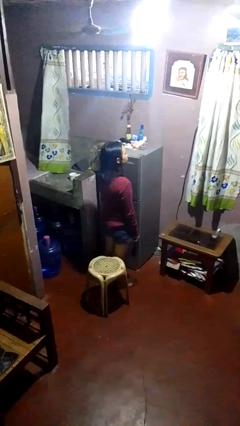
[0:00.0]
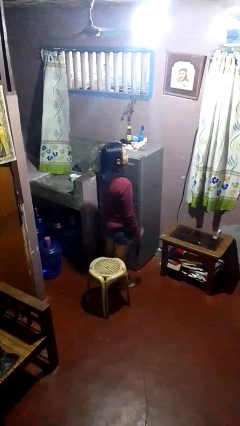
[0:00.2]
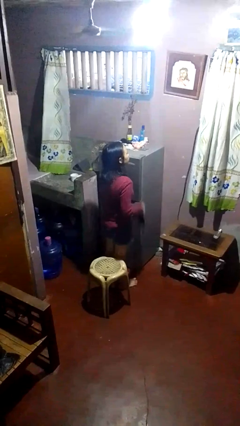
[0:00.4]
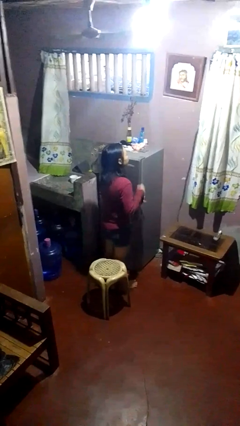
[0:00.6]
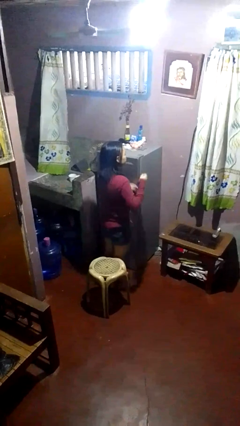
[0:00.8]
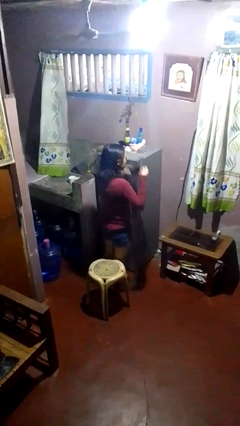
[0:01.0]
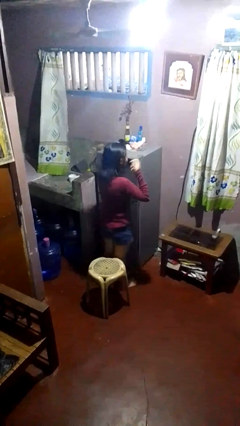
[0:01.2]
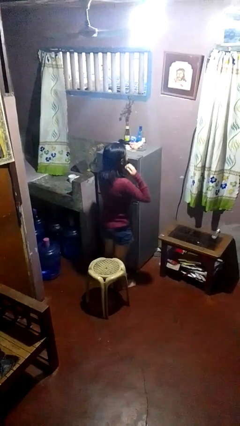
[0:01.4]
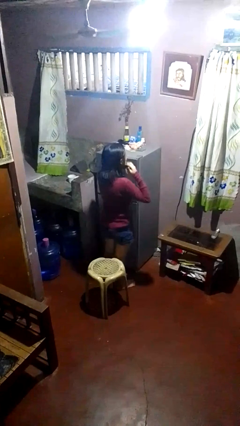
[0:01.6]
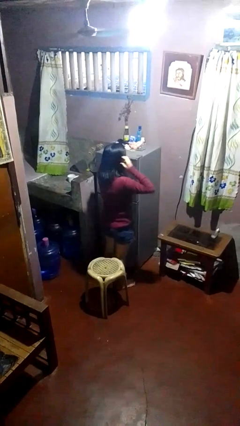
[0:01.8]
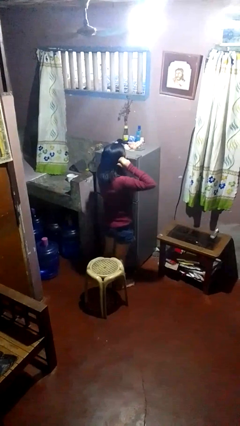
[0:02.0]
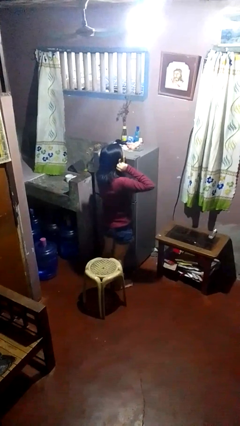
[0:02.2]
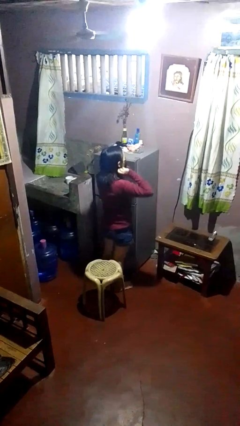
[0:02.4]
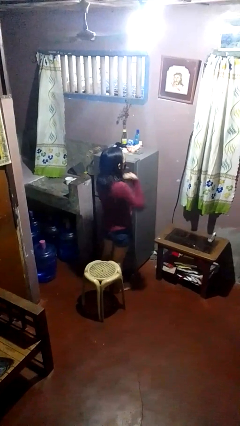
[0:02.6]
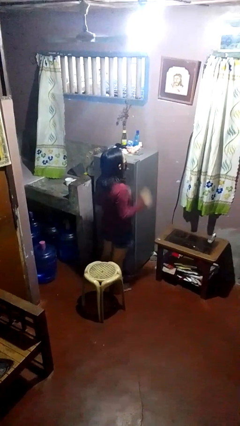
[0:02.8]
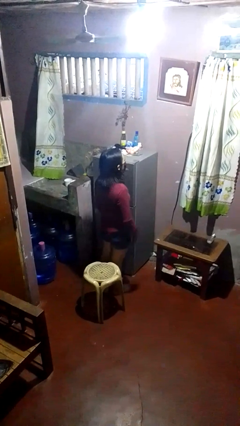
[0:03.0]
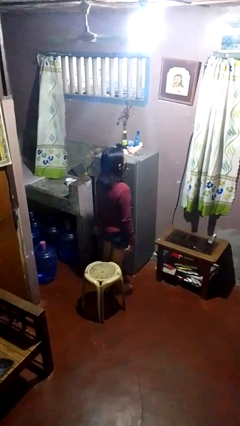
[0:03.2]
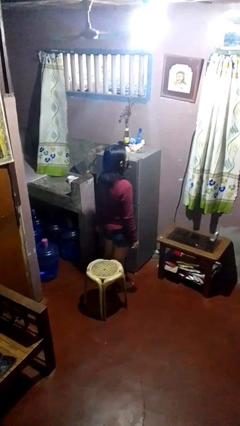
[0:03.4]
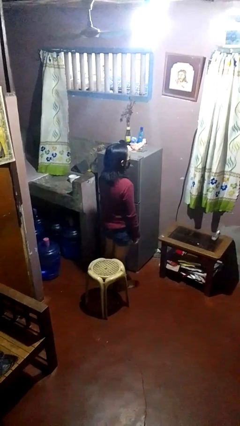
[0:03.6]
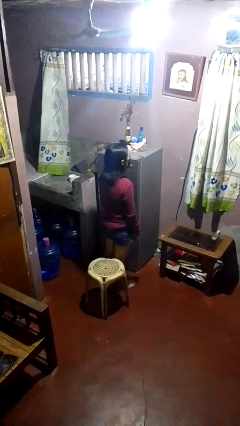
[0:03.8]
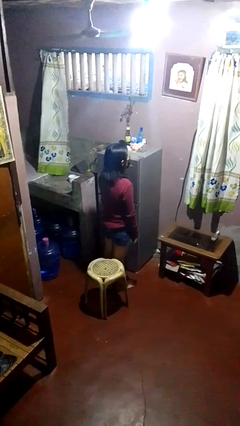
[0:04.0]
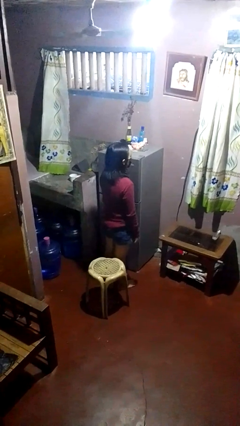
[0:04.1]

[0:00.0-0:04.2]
person puts on facemask

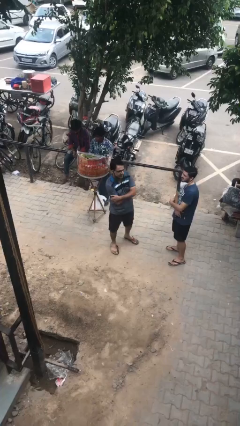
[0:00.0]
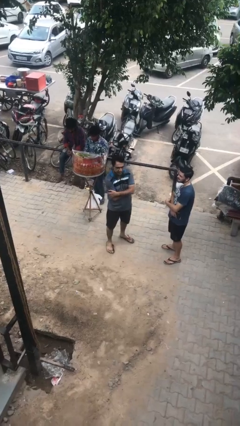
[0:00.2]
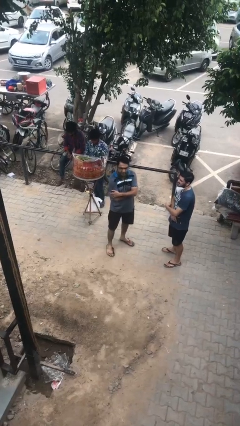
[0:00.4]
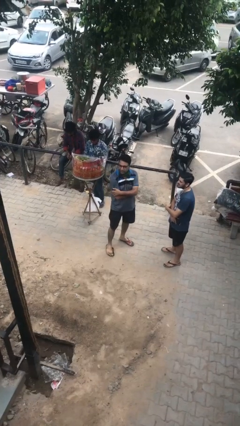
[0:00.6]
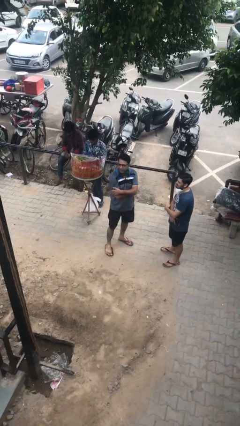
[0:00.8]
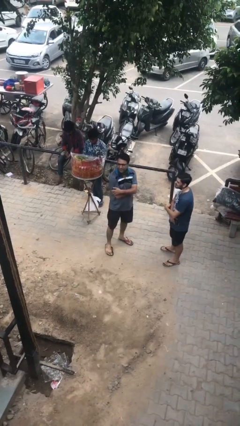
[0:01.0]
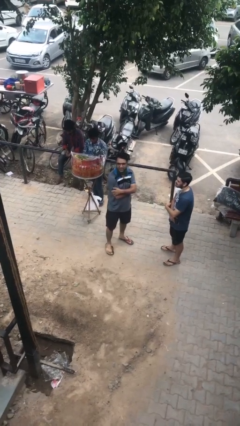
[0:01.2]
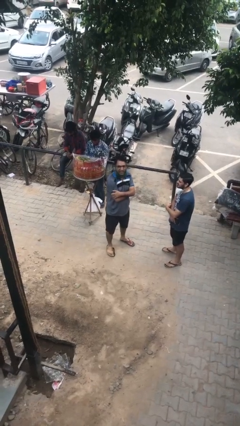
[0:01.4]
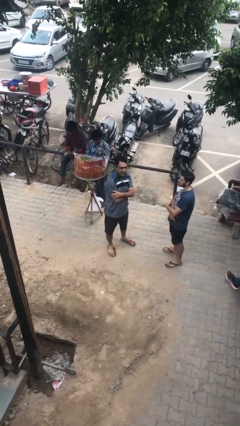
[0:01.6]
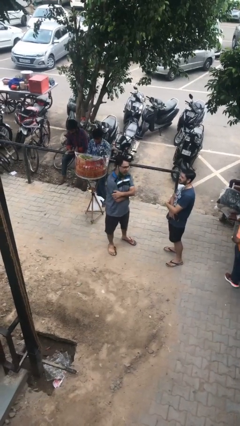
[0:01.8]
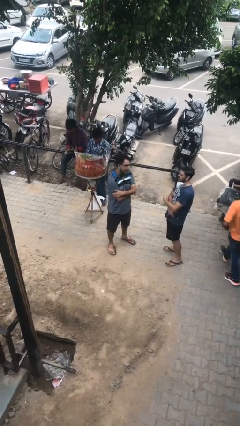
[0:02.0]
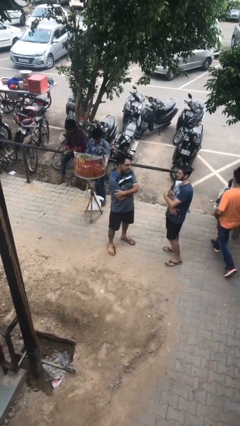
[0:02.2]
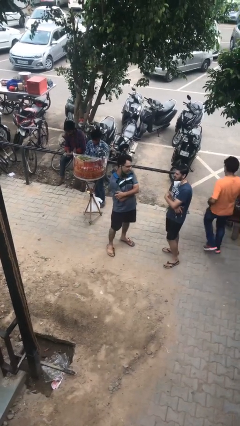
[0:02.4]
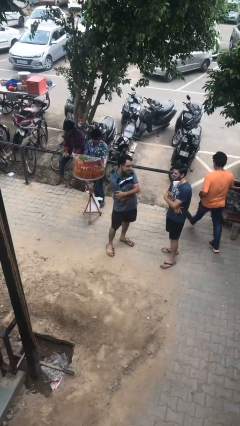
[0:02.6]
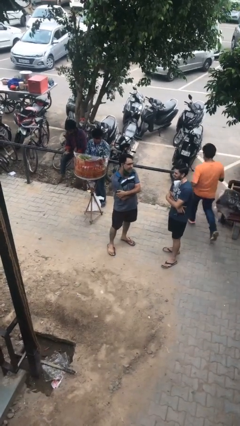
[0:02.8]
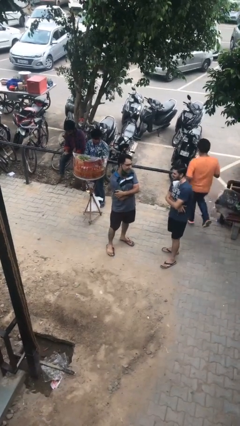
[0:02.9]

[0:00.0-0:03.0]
person laughs with person

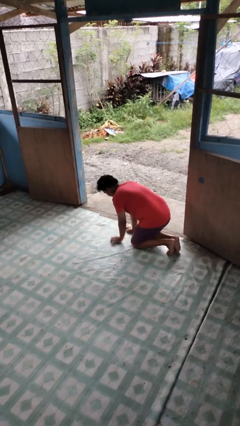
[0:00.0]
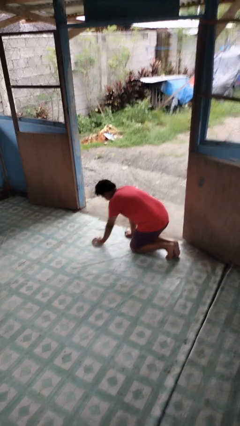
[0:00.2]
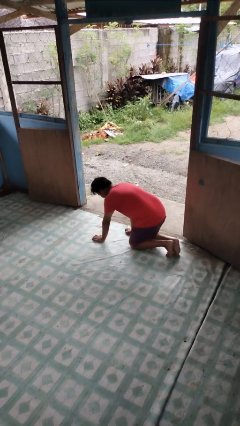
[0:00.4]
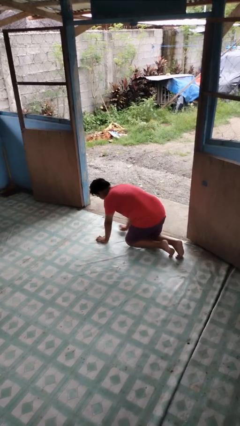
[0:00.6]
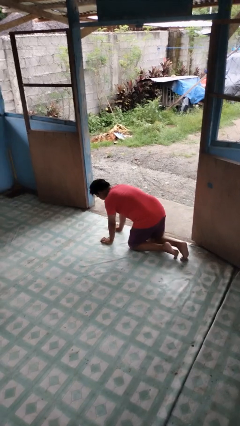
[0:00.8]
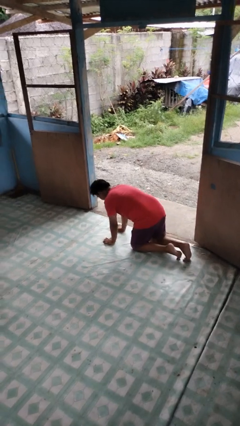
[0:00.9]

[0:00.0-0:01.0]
person crawls

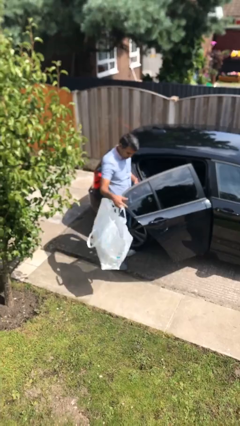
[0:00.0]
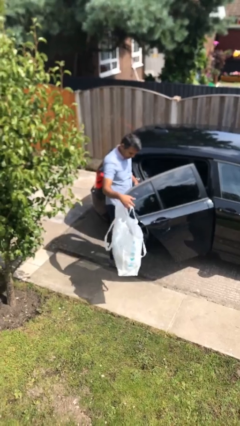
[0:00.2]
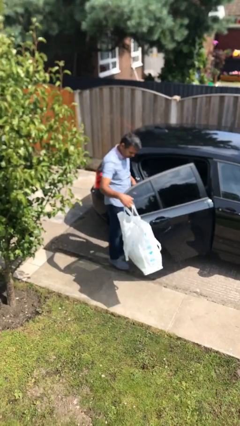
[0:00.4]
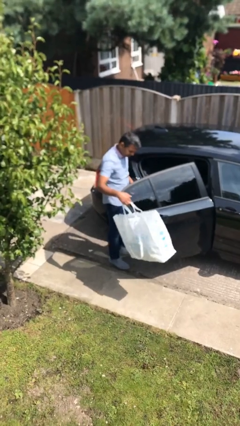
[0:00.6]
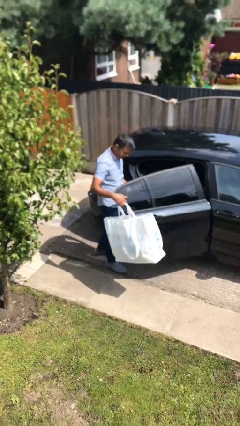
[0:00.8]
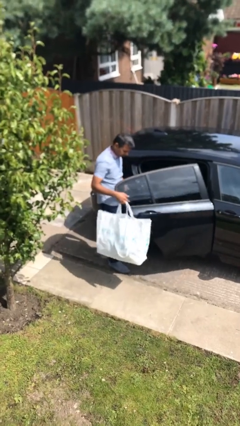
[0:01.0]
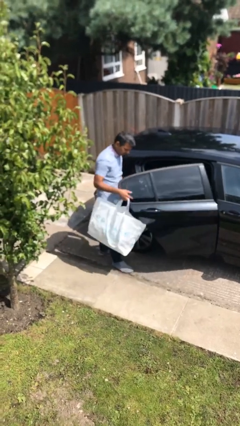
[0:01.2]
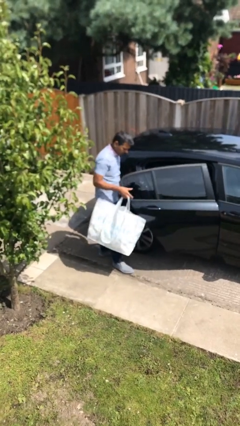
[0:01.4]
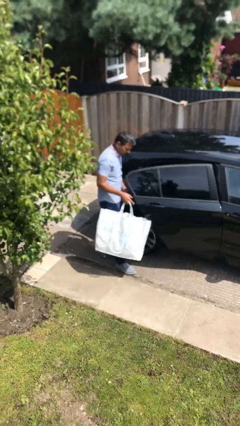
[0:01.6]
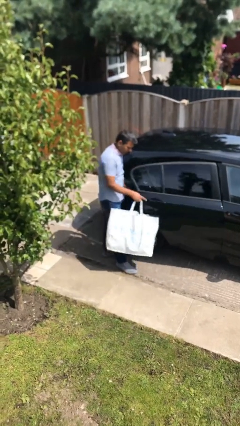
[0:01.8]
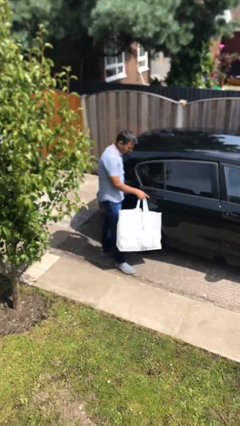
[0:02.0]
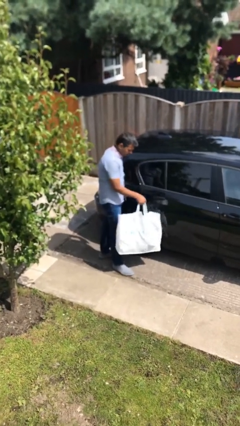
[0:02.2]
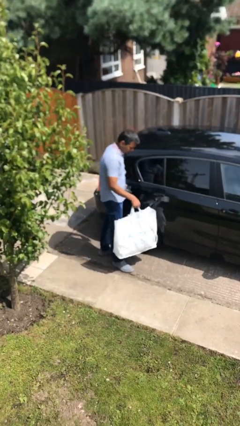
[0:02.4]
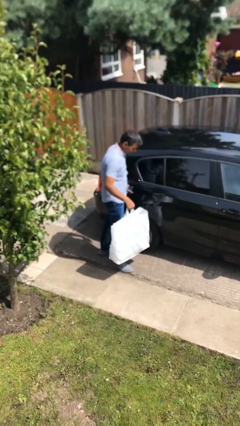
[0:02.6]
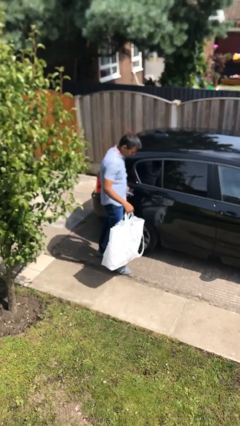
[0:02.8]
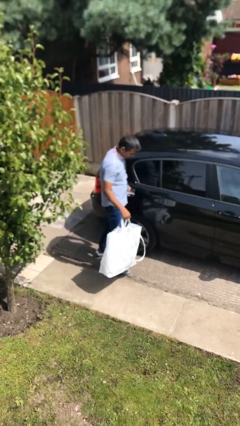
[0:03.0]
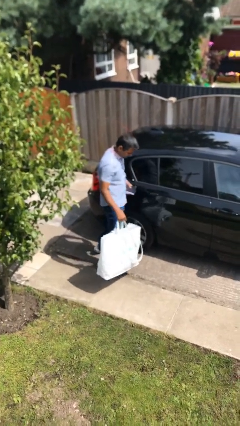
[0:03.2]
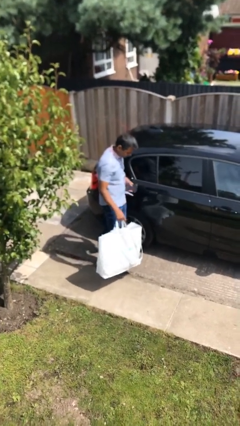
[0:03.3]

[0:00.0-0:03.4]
person closes car door

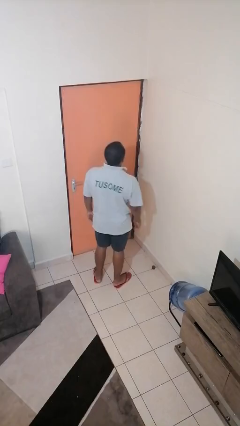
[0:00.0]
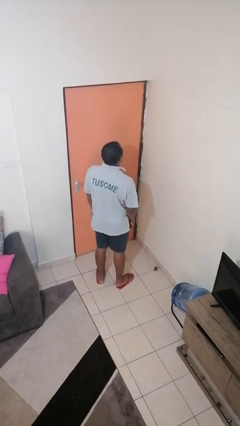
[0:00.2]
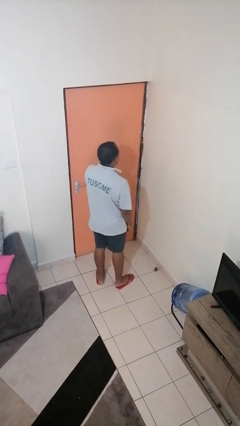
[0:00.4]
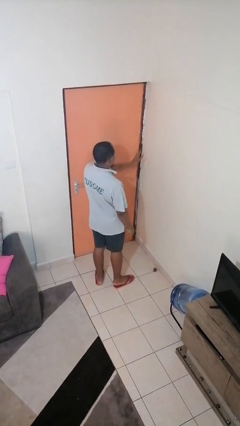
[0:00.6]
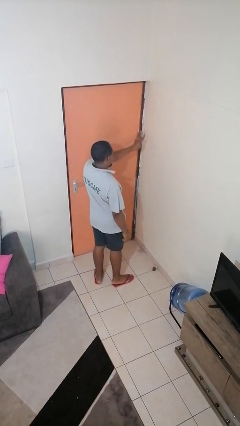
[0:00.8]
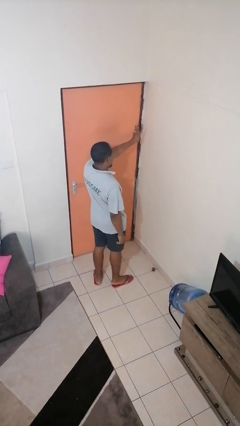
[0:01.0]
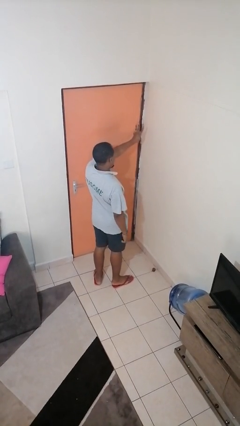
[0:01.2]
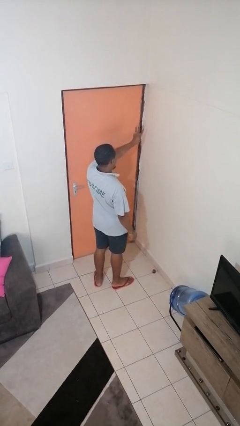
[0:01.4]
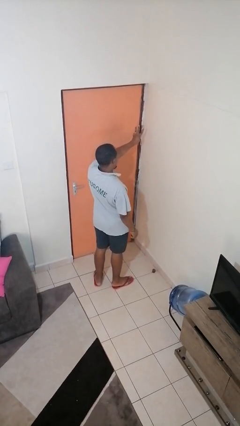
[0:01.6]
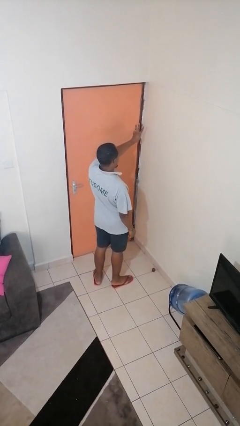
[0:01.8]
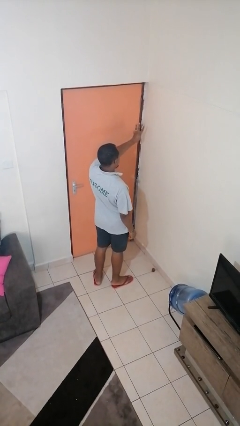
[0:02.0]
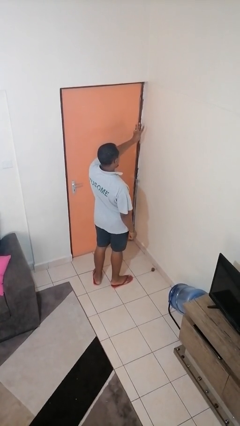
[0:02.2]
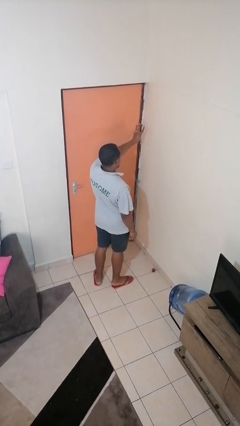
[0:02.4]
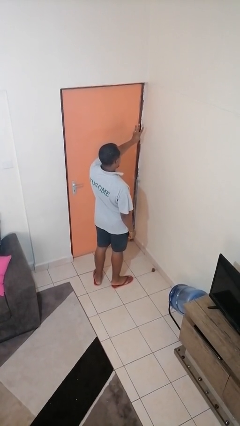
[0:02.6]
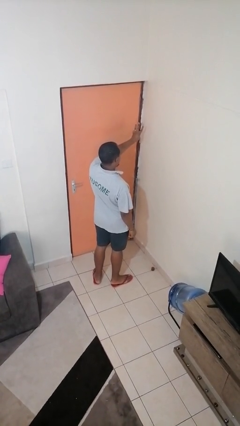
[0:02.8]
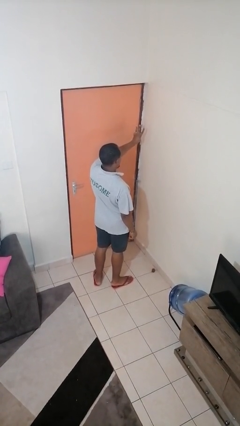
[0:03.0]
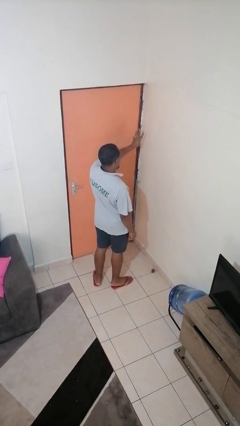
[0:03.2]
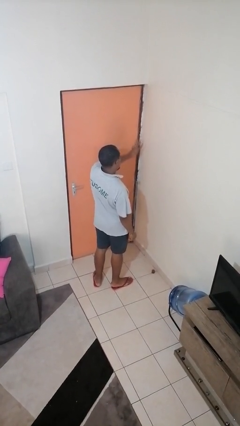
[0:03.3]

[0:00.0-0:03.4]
person gestures number three

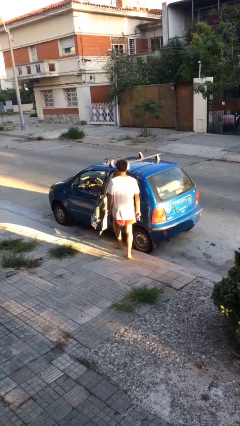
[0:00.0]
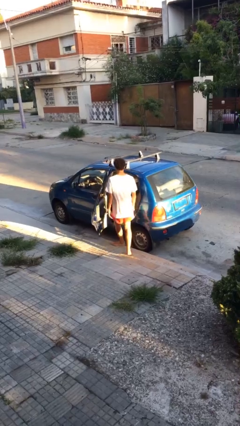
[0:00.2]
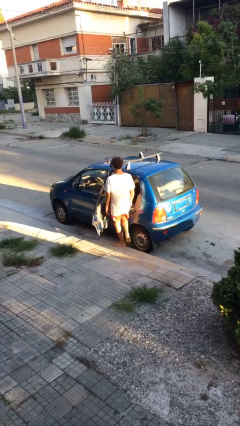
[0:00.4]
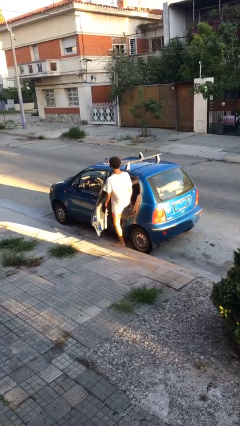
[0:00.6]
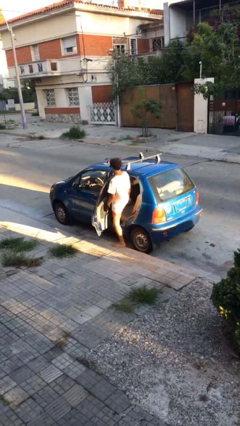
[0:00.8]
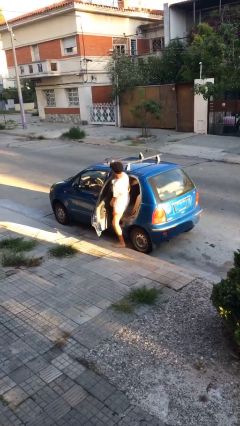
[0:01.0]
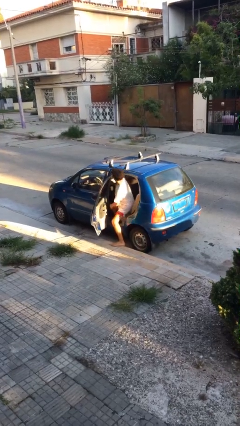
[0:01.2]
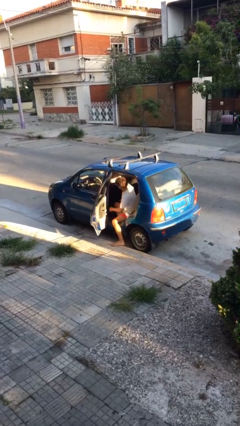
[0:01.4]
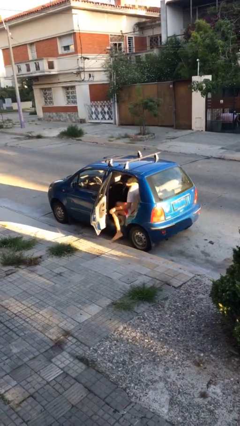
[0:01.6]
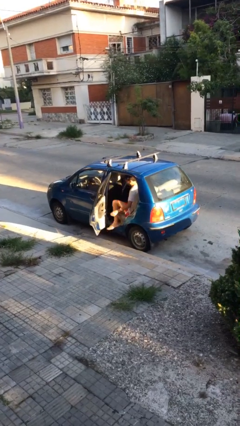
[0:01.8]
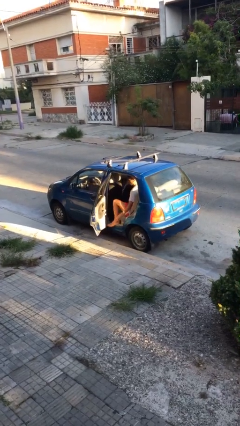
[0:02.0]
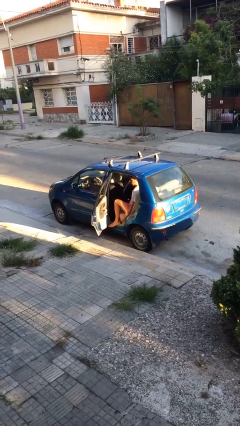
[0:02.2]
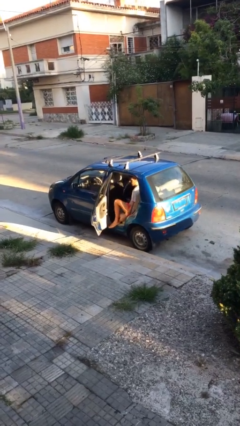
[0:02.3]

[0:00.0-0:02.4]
person enters car
